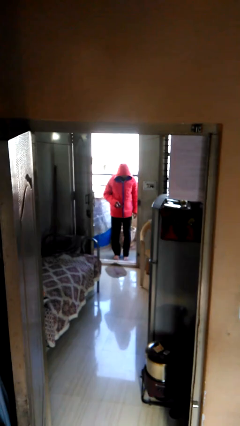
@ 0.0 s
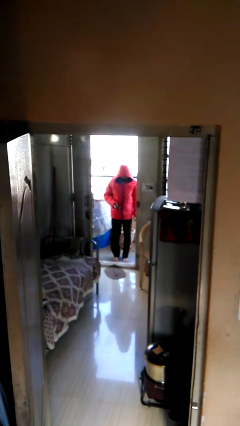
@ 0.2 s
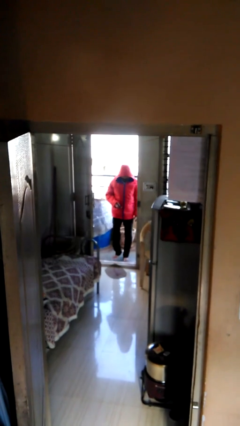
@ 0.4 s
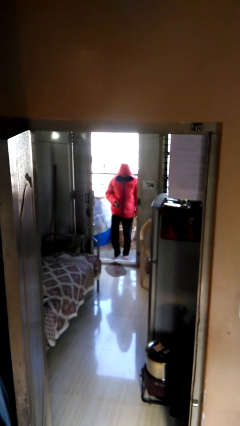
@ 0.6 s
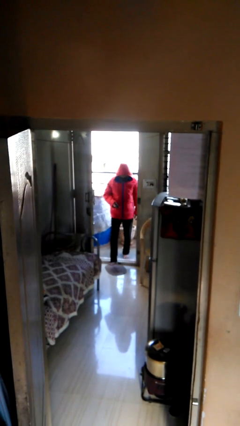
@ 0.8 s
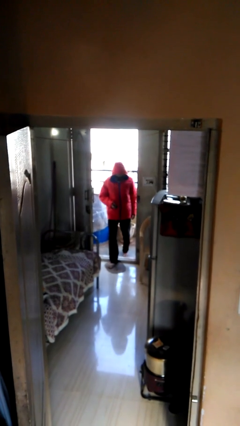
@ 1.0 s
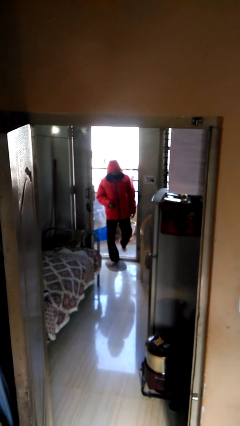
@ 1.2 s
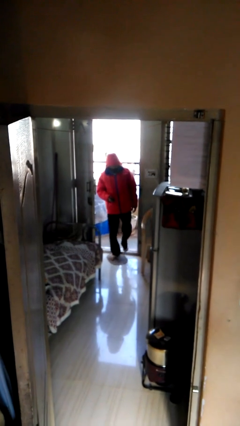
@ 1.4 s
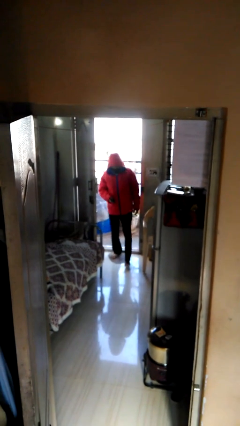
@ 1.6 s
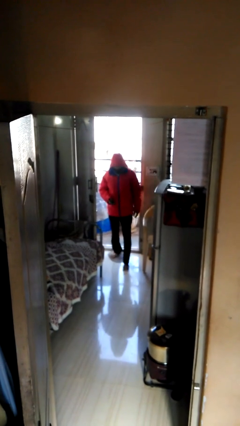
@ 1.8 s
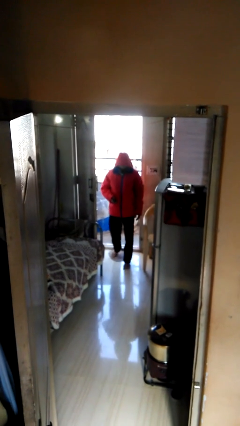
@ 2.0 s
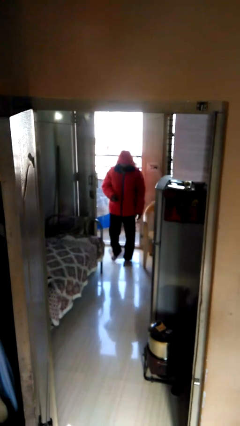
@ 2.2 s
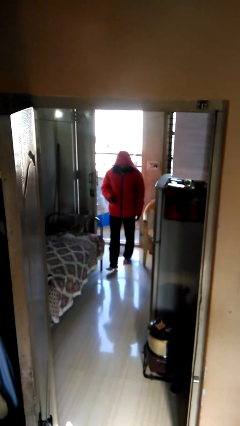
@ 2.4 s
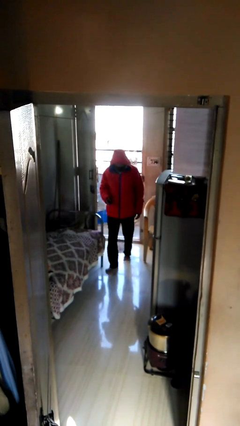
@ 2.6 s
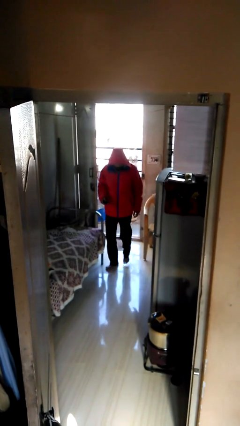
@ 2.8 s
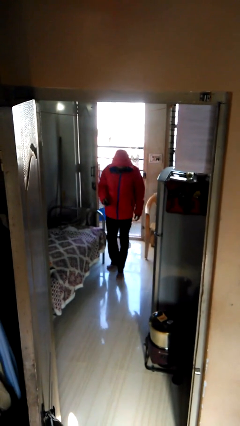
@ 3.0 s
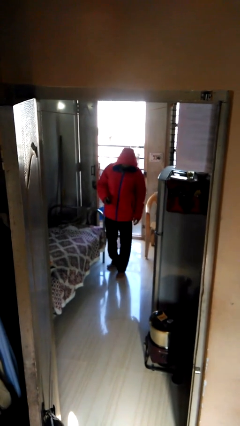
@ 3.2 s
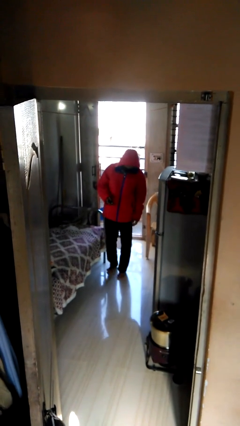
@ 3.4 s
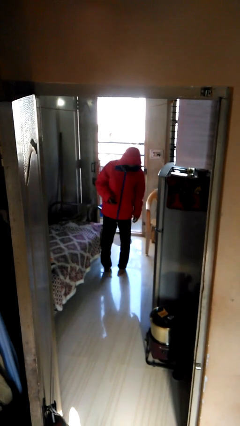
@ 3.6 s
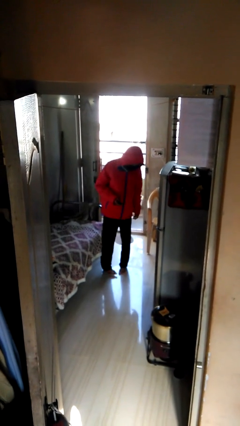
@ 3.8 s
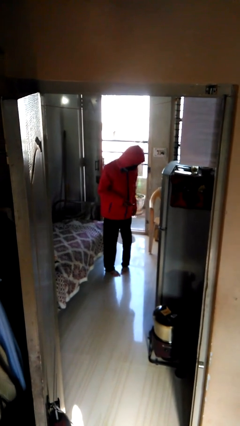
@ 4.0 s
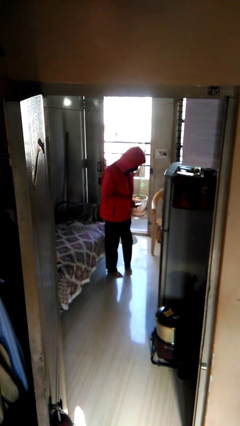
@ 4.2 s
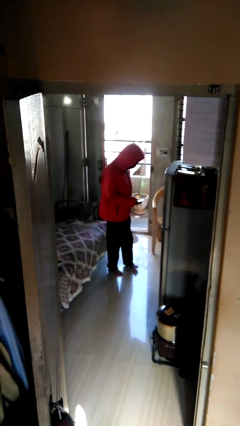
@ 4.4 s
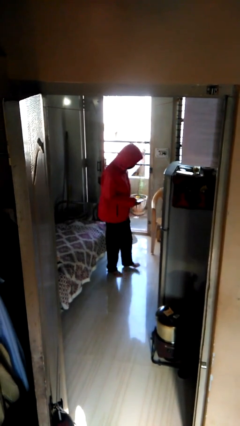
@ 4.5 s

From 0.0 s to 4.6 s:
person enters scene through structure

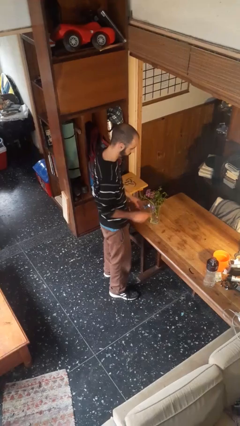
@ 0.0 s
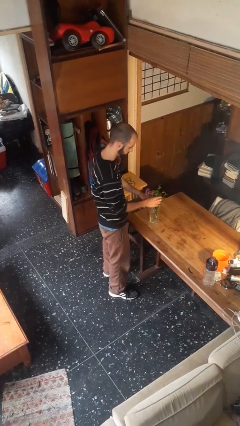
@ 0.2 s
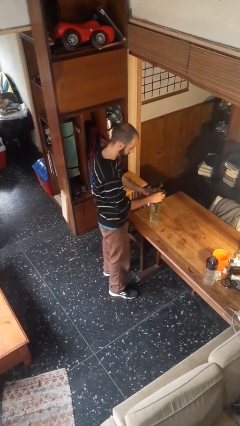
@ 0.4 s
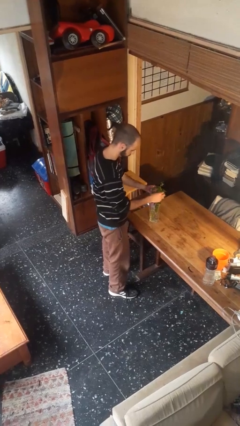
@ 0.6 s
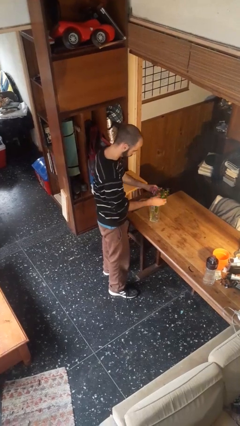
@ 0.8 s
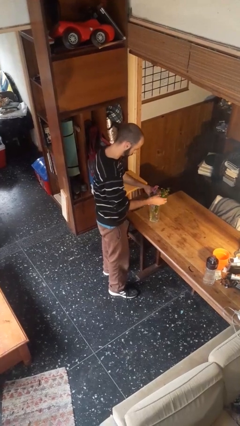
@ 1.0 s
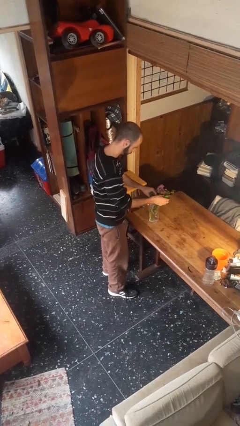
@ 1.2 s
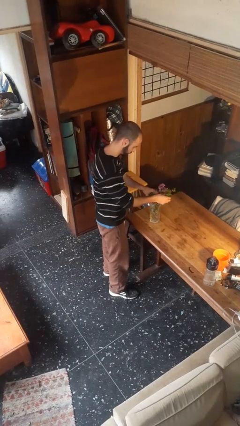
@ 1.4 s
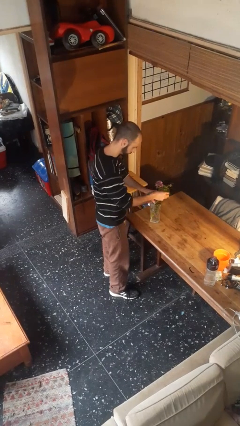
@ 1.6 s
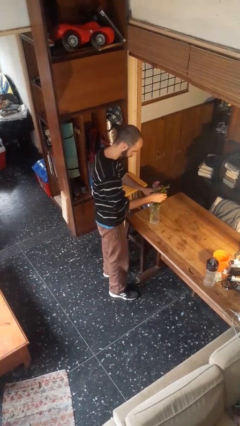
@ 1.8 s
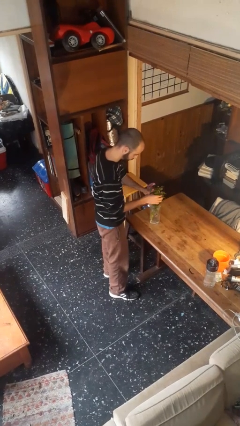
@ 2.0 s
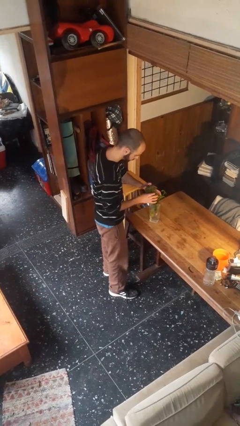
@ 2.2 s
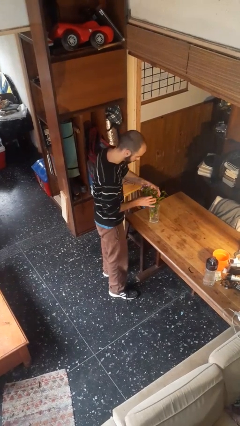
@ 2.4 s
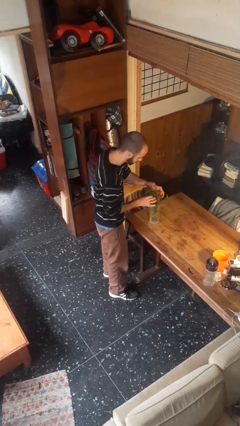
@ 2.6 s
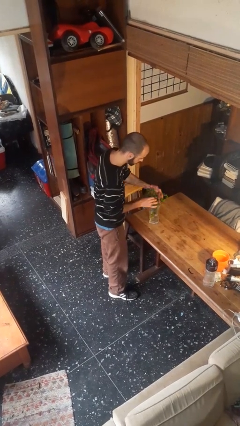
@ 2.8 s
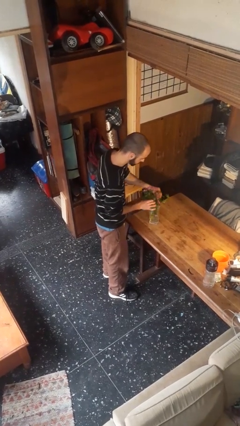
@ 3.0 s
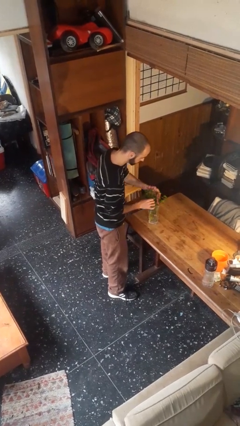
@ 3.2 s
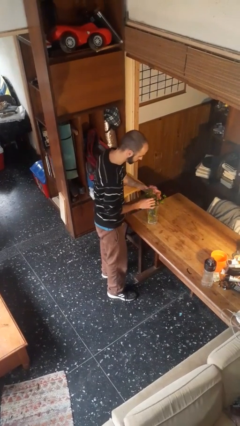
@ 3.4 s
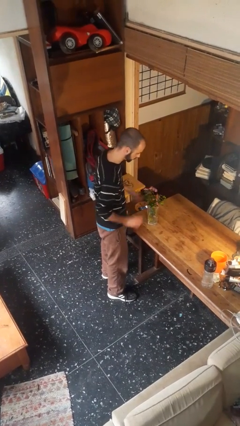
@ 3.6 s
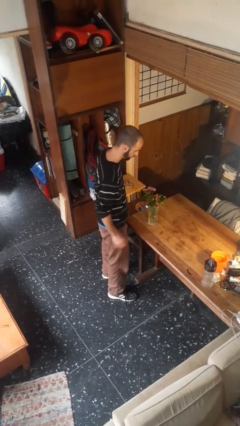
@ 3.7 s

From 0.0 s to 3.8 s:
person arranges flowers in vase

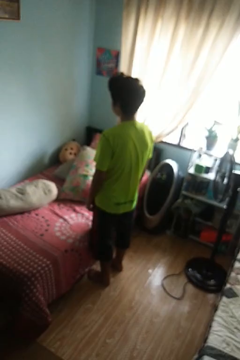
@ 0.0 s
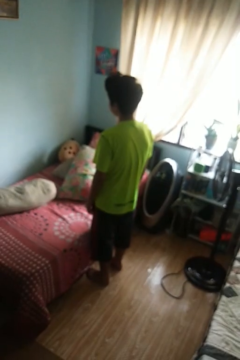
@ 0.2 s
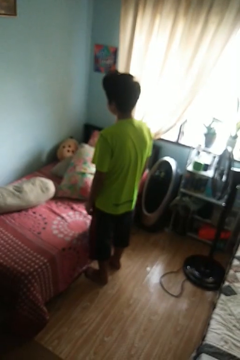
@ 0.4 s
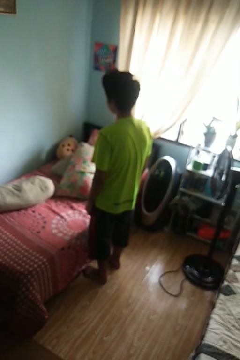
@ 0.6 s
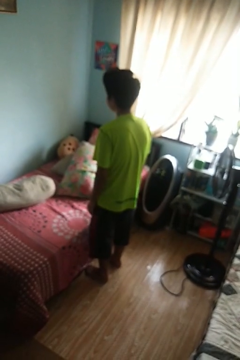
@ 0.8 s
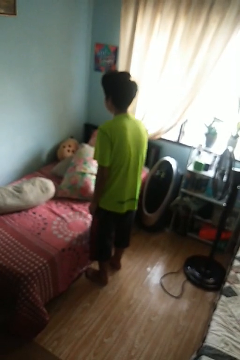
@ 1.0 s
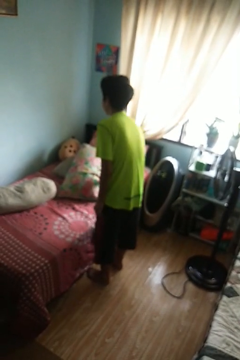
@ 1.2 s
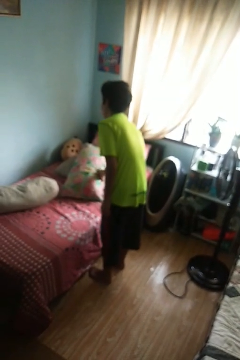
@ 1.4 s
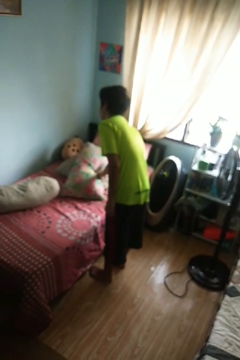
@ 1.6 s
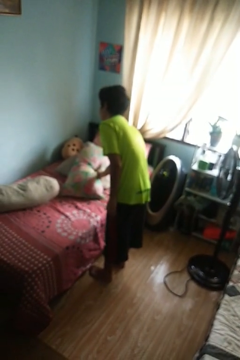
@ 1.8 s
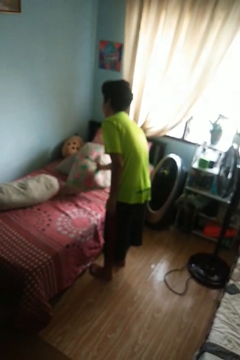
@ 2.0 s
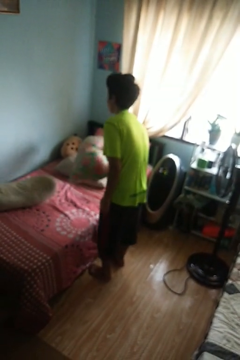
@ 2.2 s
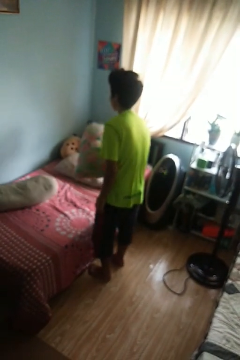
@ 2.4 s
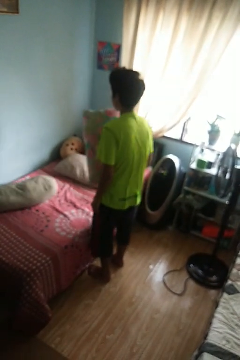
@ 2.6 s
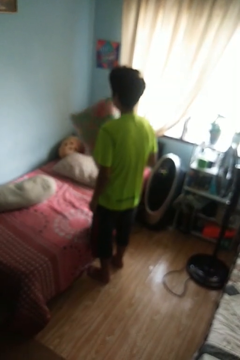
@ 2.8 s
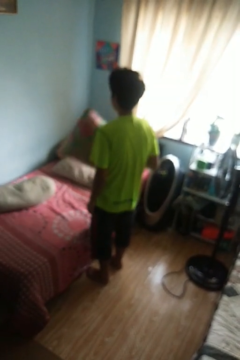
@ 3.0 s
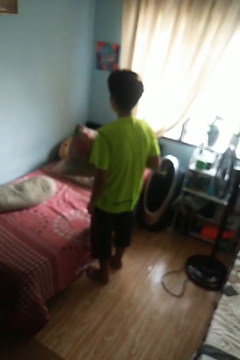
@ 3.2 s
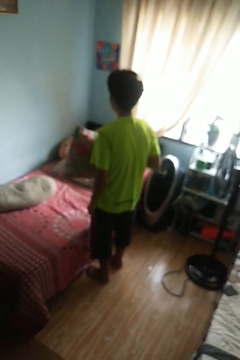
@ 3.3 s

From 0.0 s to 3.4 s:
person picks up object from bed

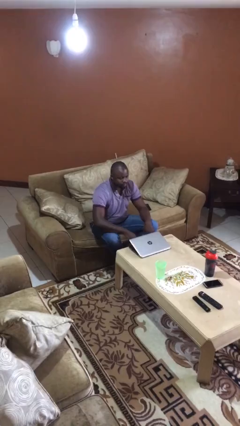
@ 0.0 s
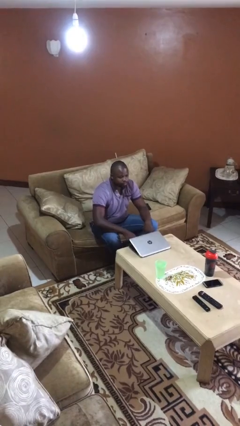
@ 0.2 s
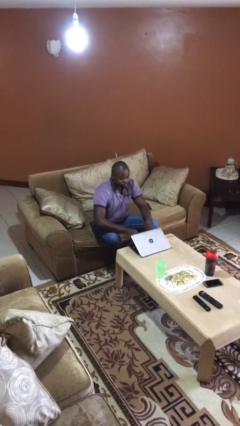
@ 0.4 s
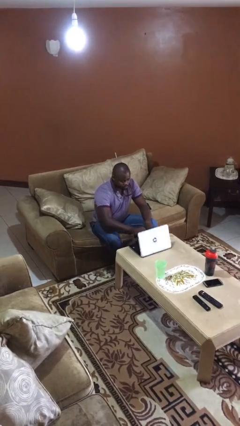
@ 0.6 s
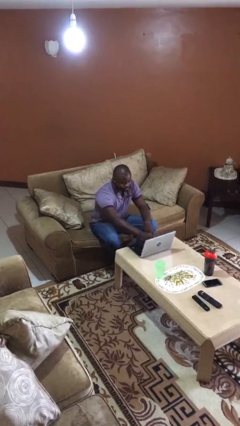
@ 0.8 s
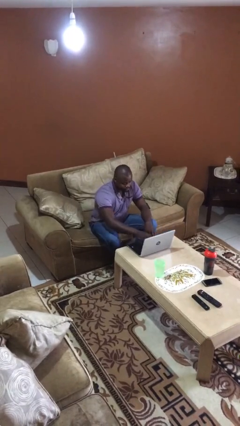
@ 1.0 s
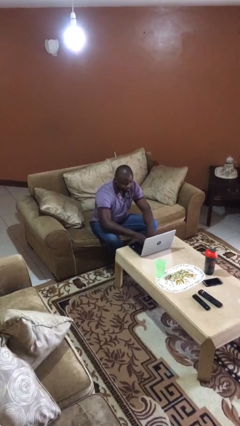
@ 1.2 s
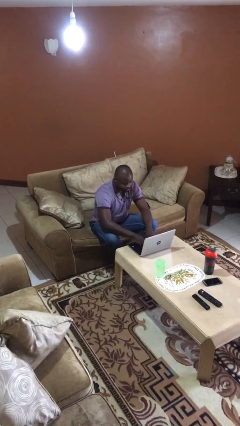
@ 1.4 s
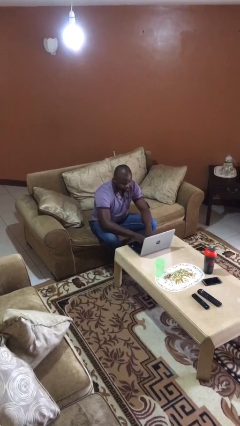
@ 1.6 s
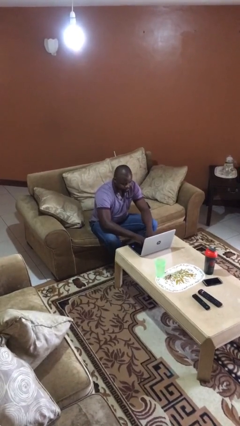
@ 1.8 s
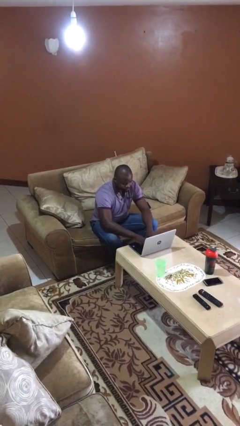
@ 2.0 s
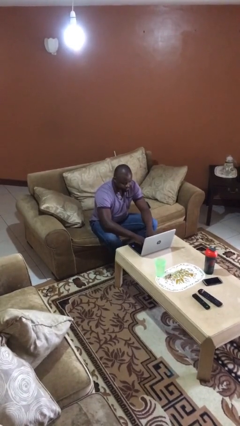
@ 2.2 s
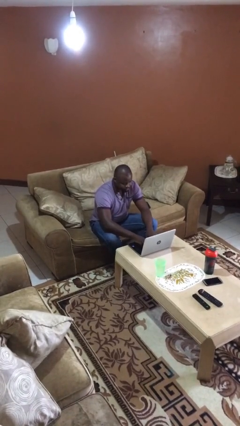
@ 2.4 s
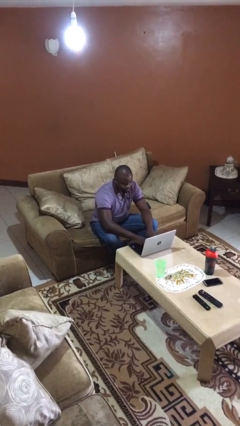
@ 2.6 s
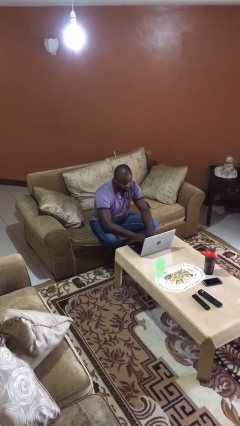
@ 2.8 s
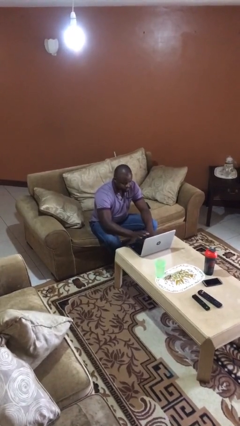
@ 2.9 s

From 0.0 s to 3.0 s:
person interacts with laptop

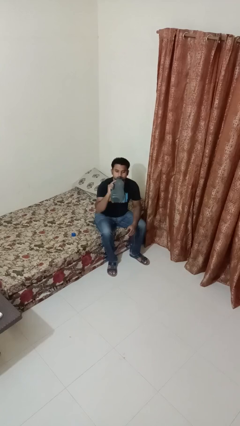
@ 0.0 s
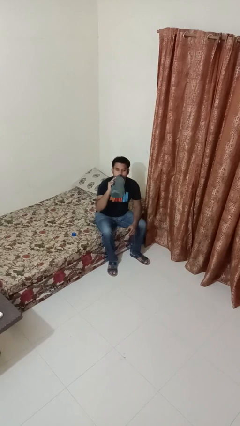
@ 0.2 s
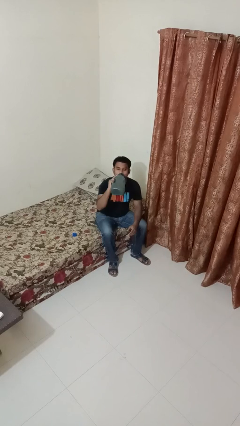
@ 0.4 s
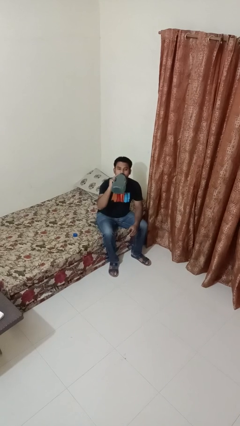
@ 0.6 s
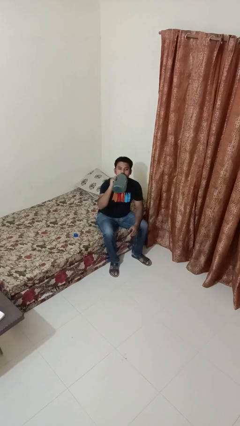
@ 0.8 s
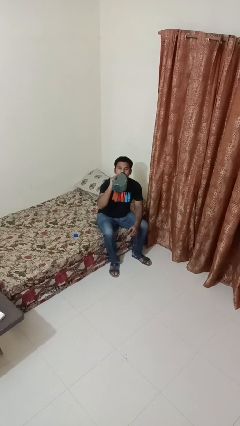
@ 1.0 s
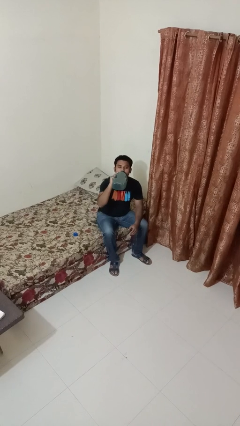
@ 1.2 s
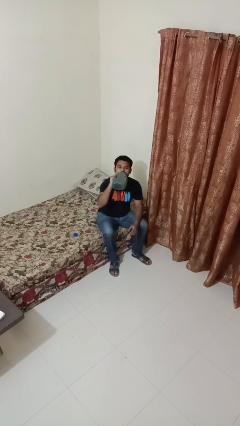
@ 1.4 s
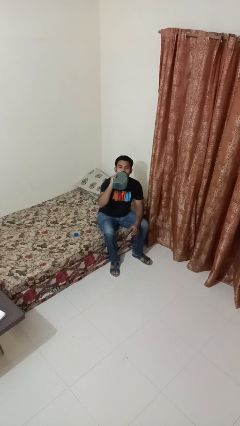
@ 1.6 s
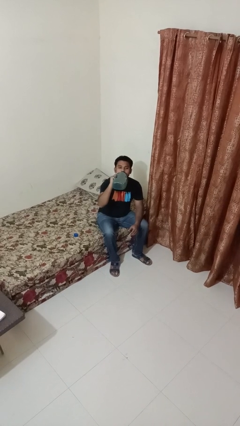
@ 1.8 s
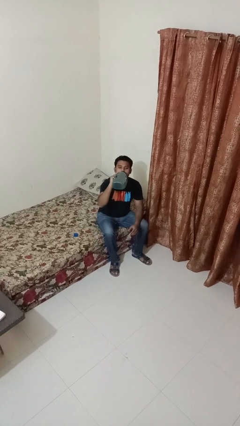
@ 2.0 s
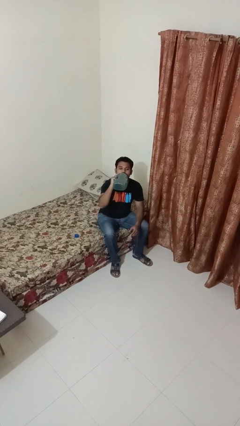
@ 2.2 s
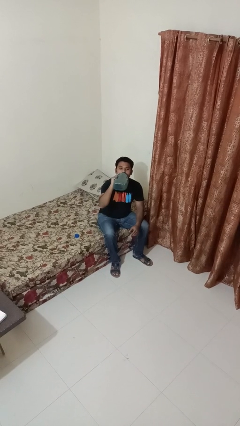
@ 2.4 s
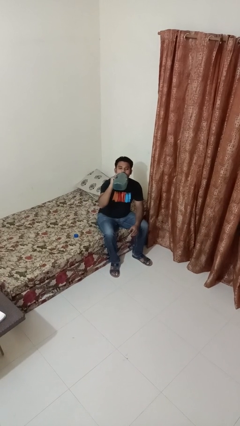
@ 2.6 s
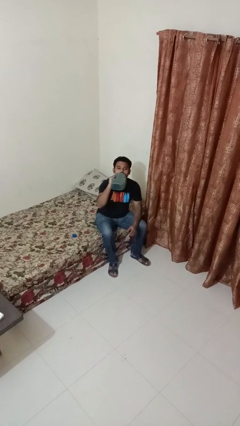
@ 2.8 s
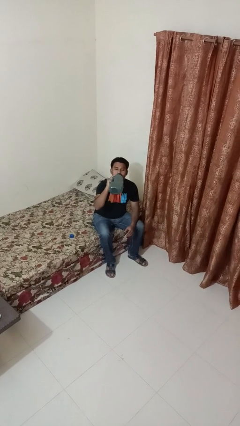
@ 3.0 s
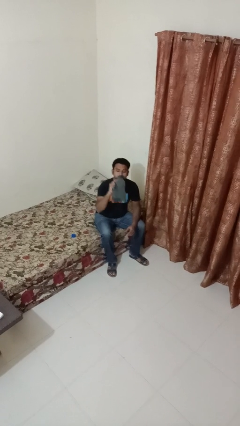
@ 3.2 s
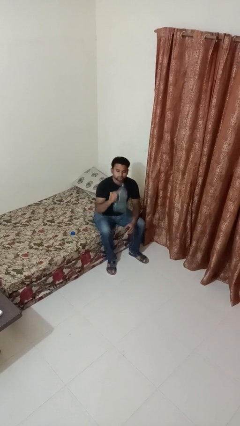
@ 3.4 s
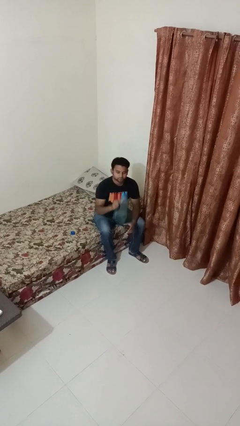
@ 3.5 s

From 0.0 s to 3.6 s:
person drinks from bottle
